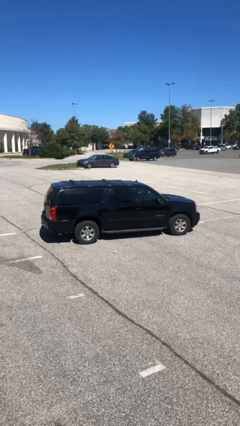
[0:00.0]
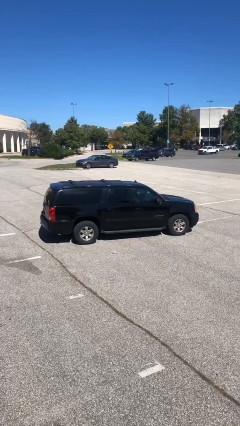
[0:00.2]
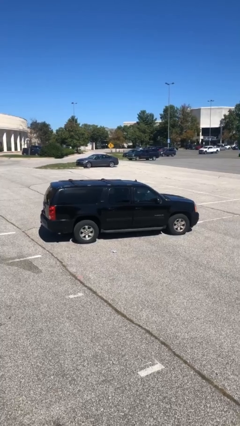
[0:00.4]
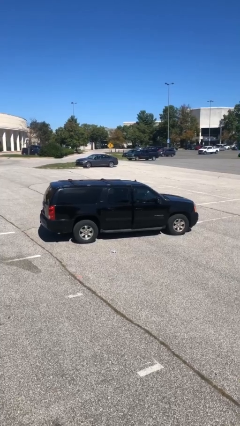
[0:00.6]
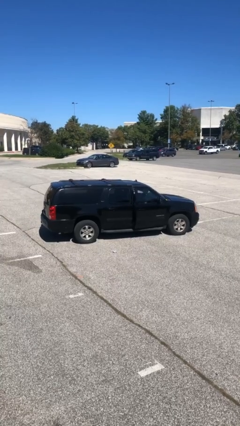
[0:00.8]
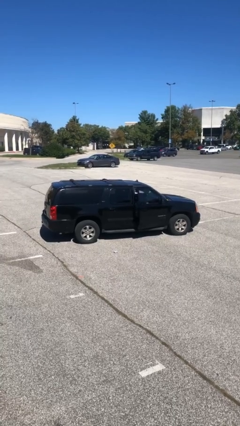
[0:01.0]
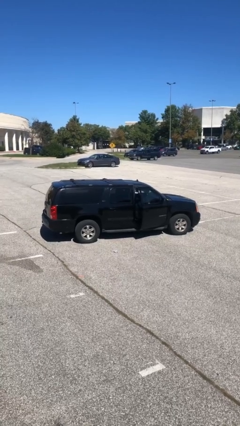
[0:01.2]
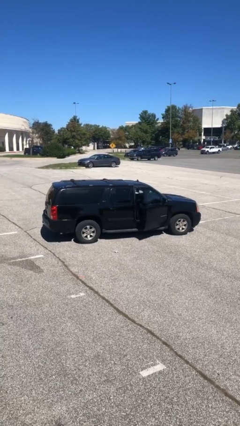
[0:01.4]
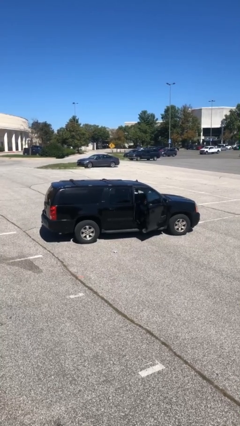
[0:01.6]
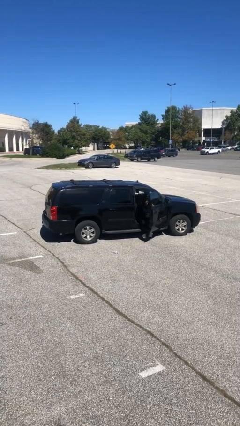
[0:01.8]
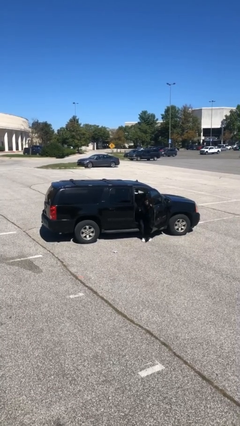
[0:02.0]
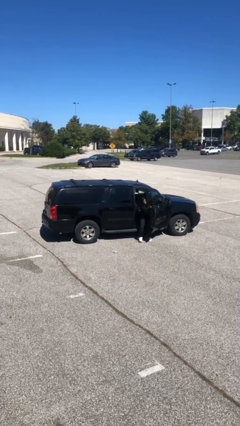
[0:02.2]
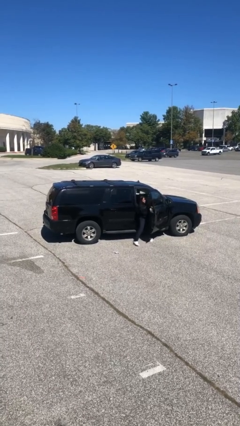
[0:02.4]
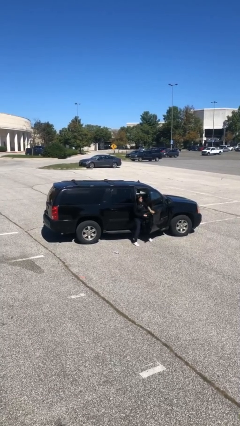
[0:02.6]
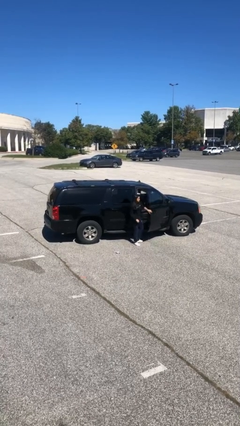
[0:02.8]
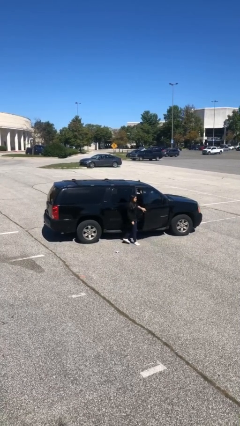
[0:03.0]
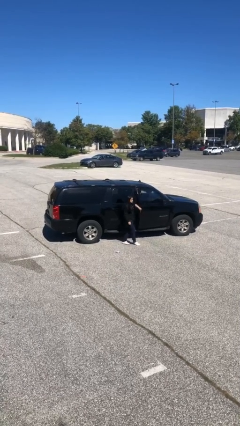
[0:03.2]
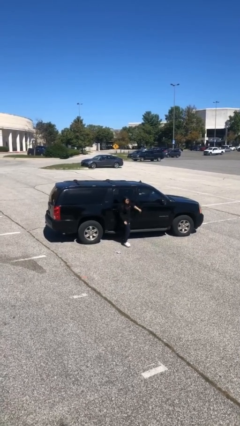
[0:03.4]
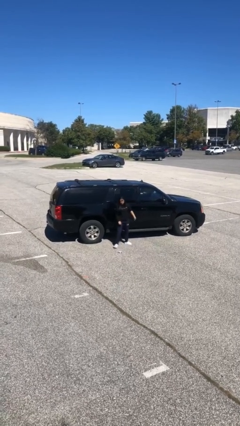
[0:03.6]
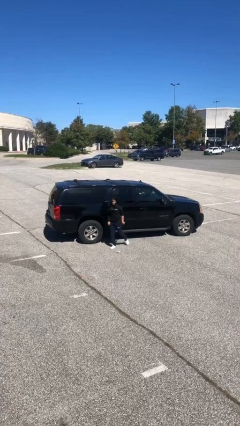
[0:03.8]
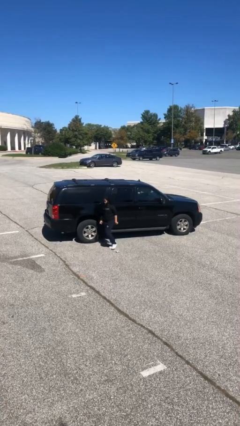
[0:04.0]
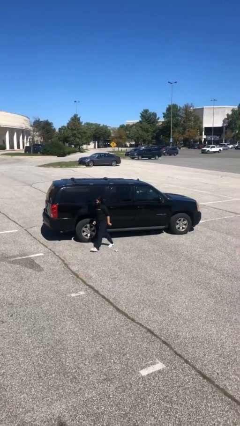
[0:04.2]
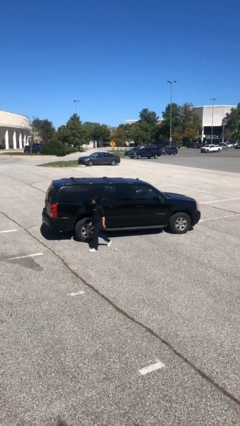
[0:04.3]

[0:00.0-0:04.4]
car drops off person

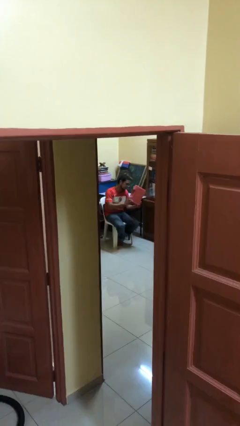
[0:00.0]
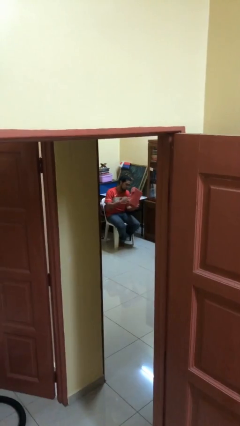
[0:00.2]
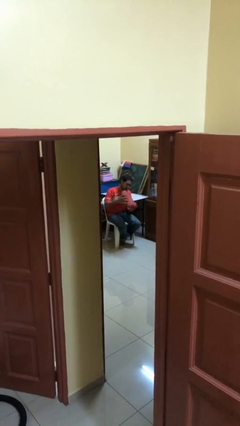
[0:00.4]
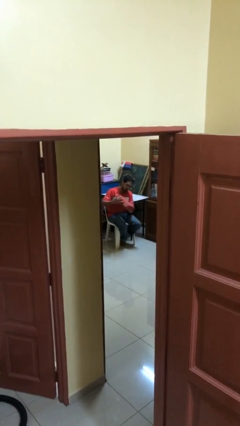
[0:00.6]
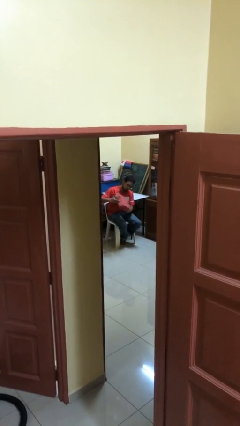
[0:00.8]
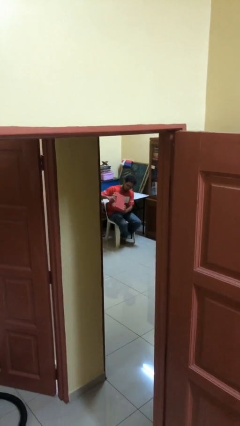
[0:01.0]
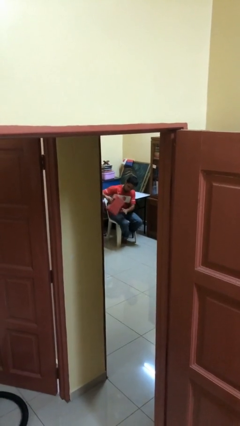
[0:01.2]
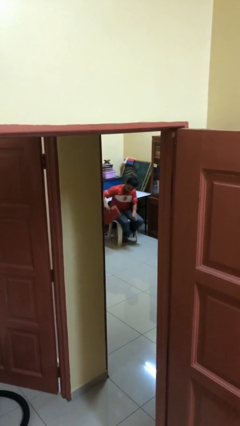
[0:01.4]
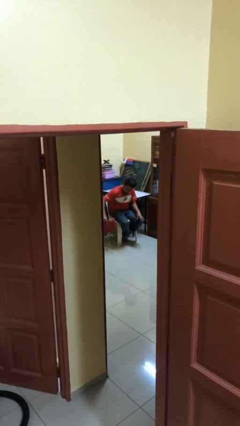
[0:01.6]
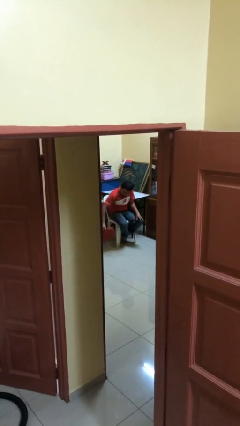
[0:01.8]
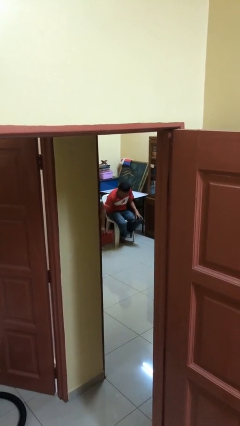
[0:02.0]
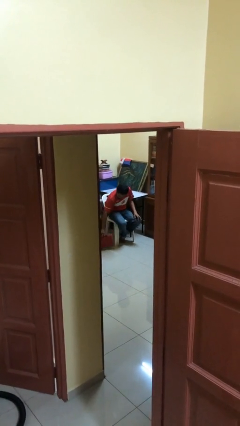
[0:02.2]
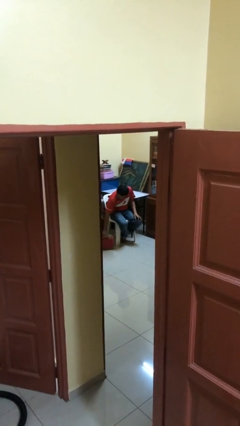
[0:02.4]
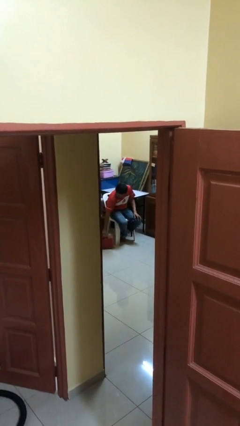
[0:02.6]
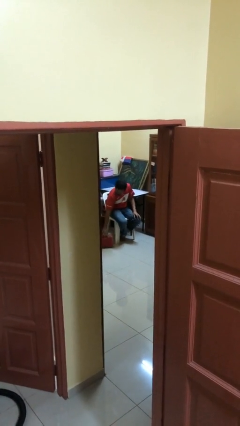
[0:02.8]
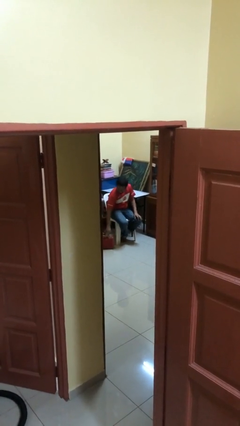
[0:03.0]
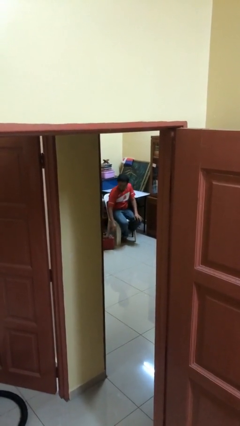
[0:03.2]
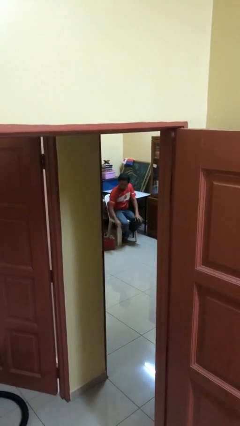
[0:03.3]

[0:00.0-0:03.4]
person puts down object on floor

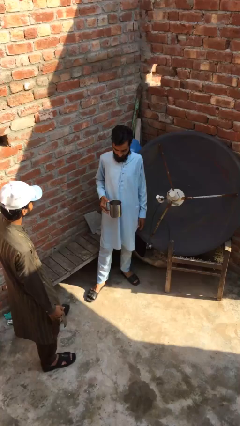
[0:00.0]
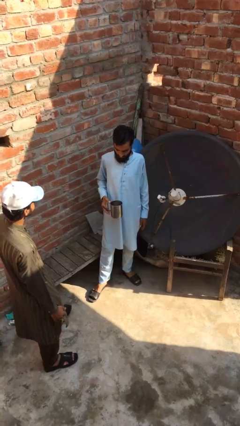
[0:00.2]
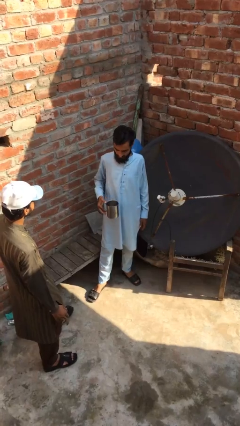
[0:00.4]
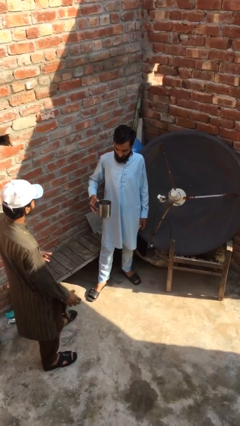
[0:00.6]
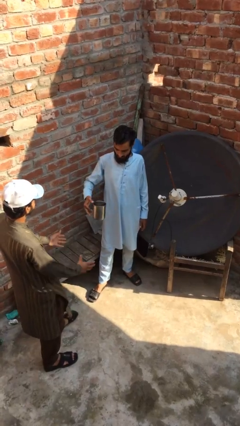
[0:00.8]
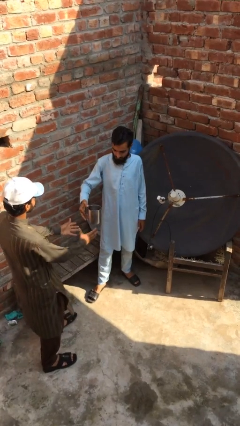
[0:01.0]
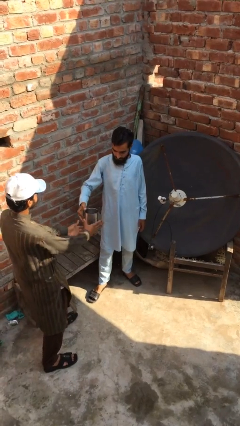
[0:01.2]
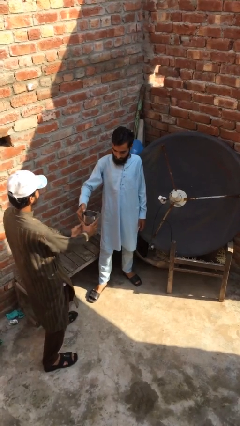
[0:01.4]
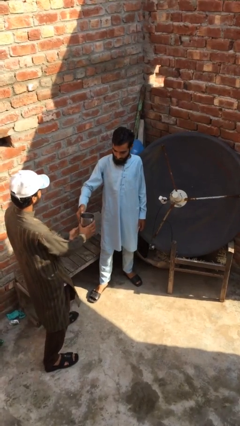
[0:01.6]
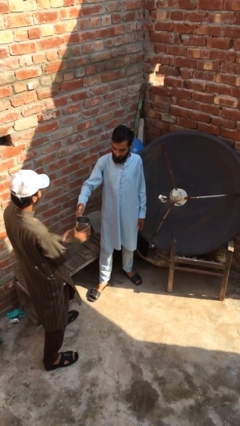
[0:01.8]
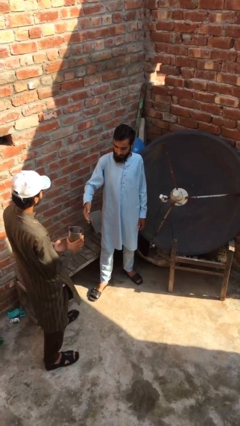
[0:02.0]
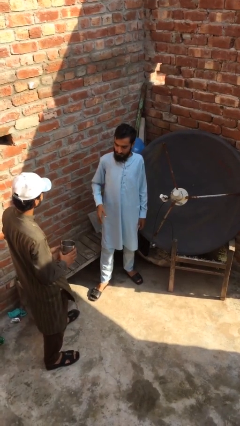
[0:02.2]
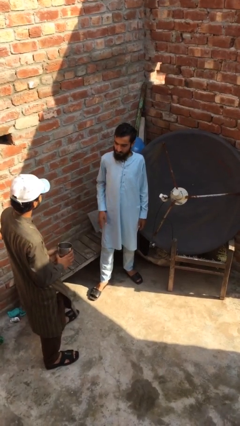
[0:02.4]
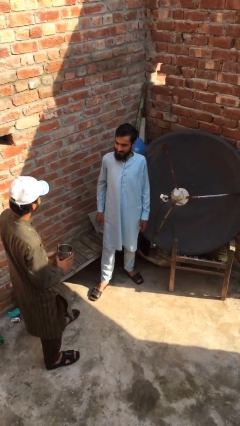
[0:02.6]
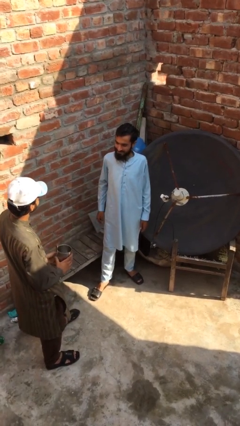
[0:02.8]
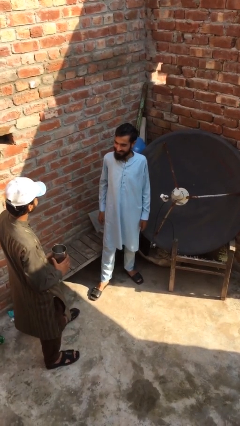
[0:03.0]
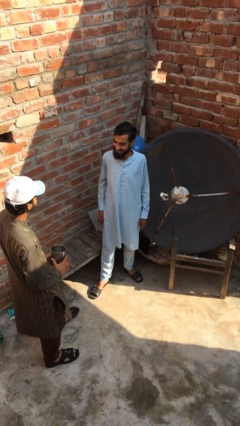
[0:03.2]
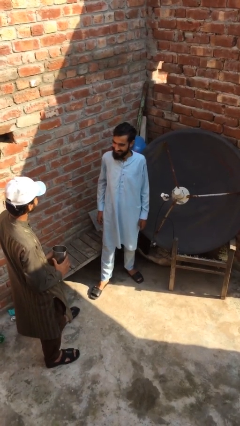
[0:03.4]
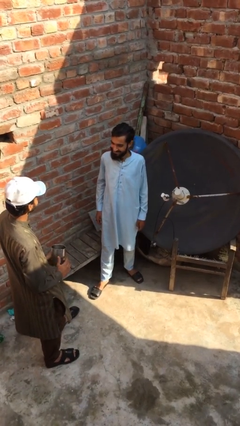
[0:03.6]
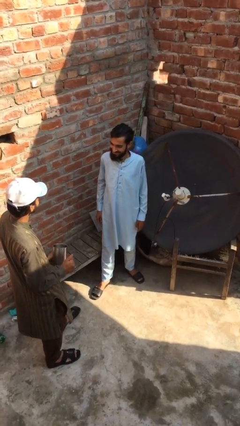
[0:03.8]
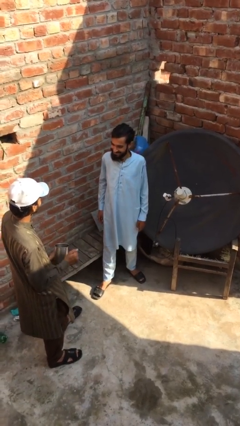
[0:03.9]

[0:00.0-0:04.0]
person transfers object to person

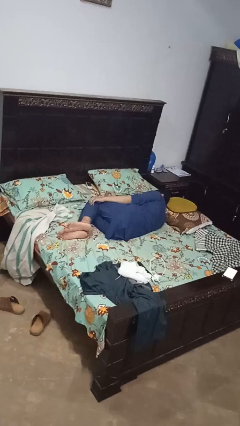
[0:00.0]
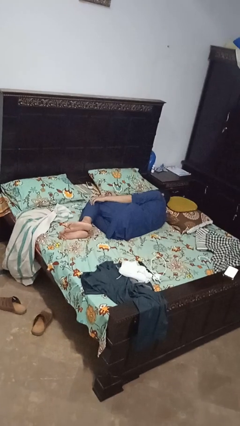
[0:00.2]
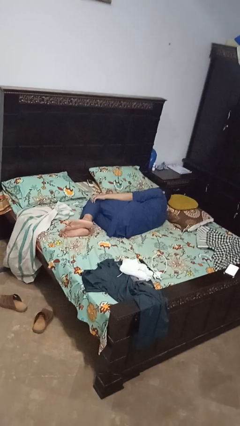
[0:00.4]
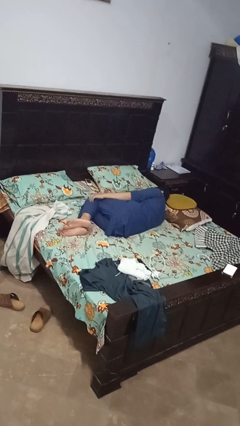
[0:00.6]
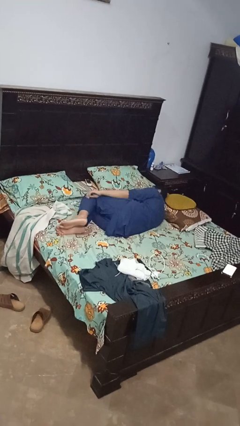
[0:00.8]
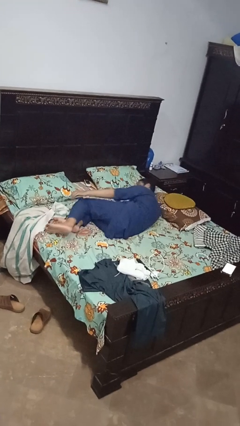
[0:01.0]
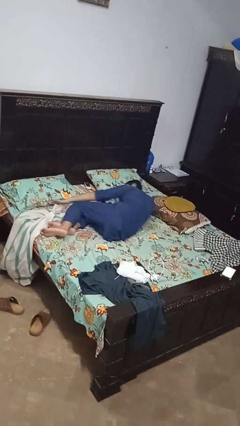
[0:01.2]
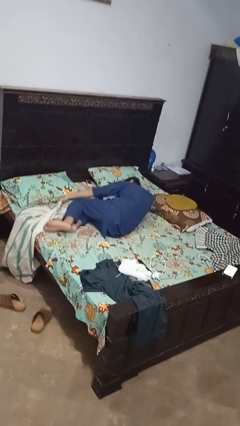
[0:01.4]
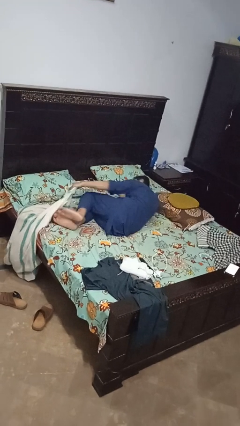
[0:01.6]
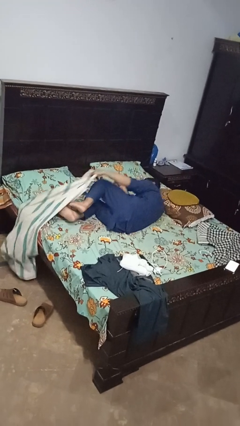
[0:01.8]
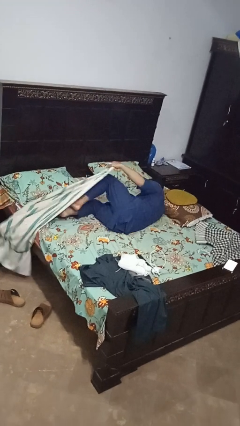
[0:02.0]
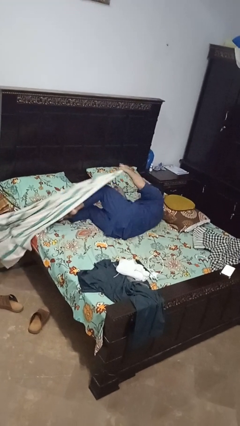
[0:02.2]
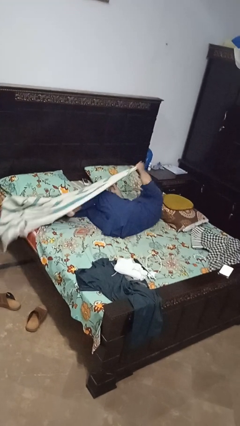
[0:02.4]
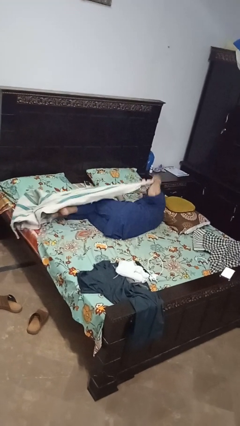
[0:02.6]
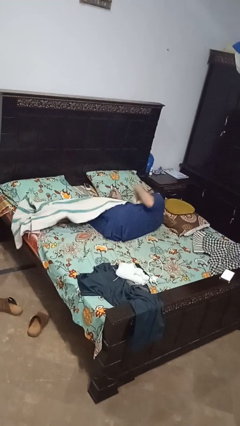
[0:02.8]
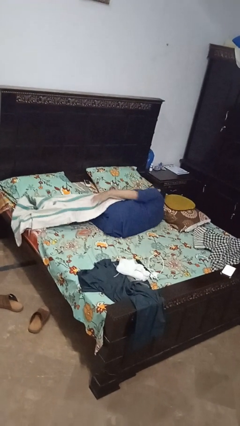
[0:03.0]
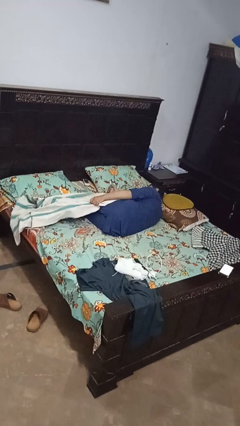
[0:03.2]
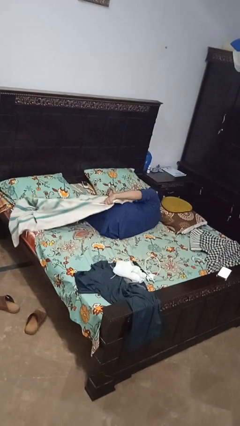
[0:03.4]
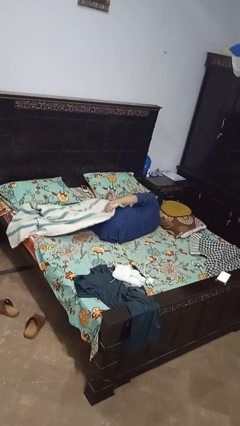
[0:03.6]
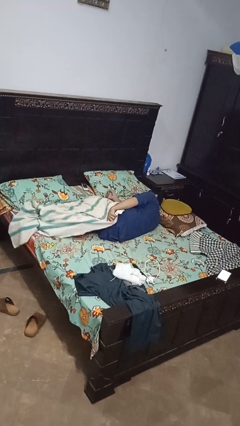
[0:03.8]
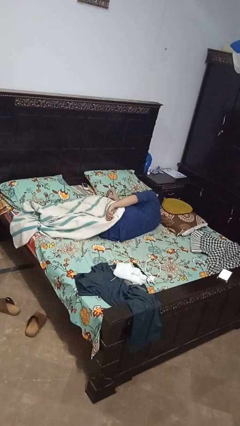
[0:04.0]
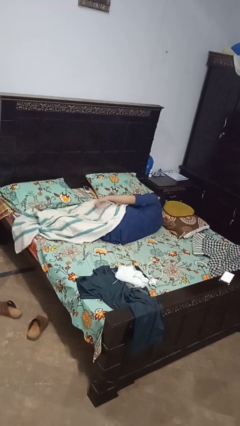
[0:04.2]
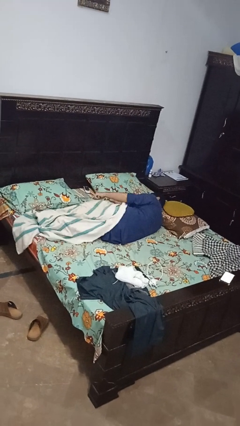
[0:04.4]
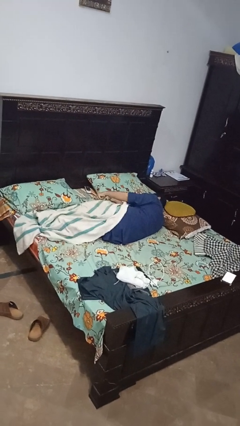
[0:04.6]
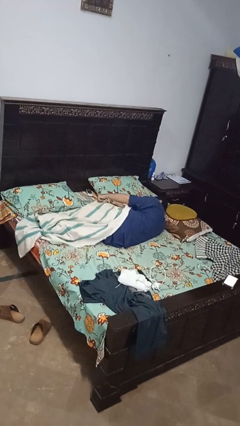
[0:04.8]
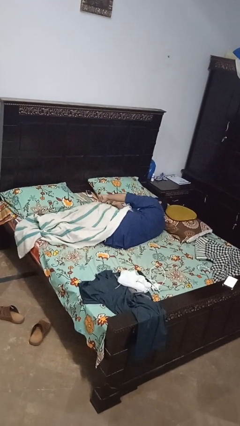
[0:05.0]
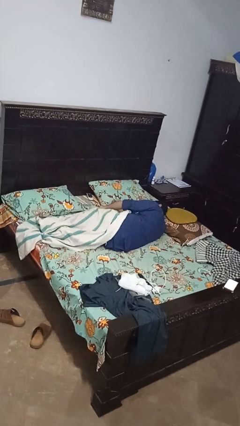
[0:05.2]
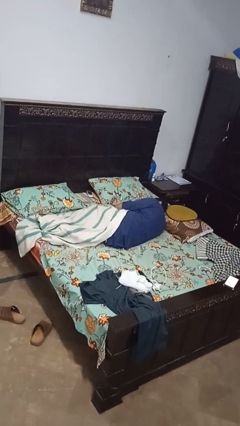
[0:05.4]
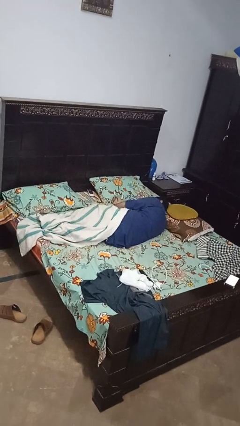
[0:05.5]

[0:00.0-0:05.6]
person covers with bedsheets
